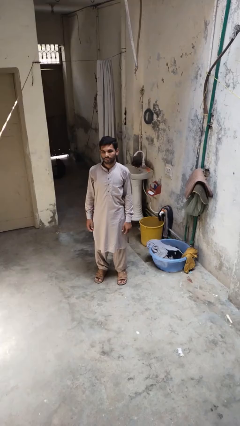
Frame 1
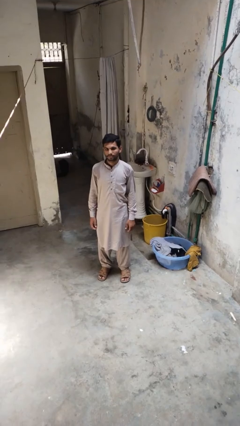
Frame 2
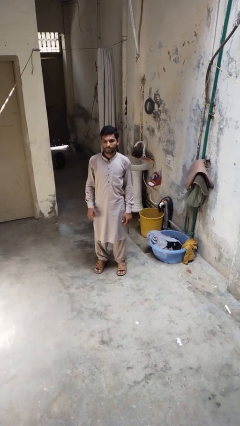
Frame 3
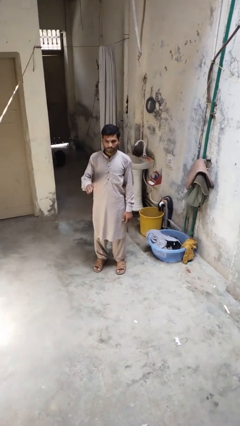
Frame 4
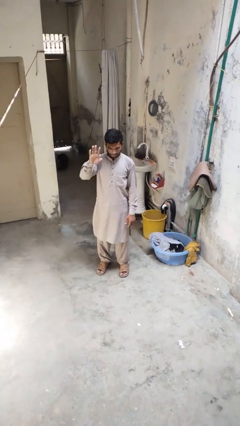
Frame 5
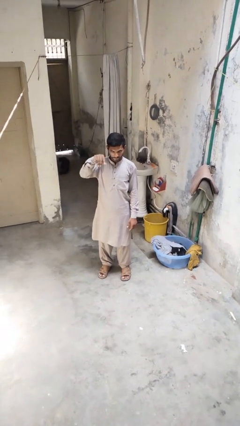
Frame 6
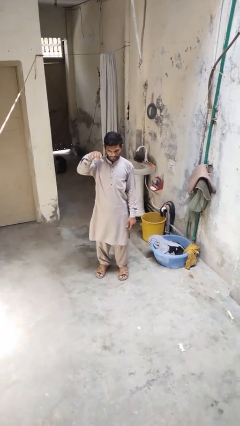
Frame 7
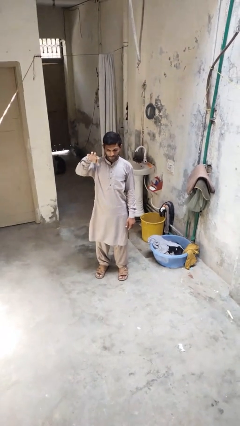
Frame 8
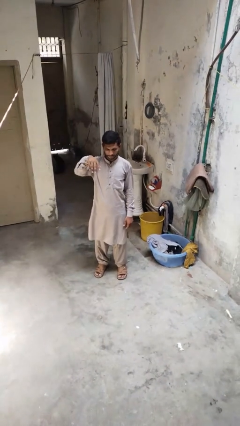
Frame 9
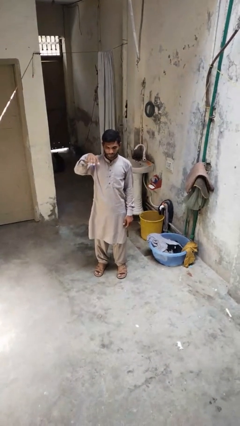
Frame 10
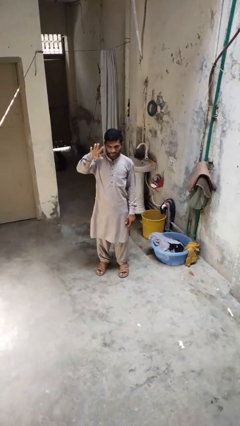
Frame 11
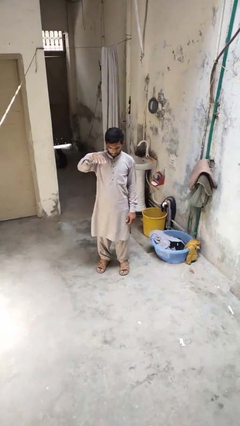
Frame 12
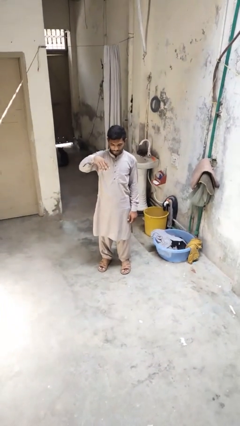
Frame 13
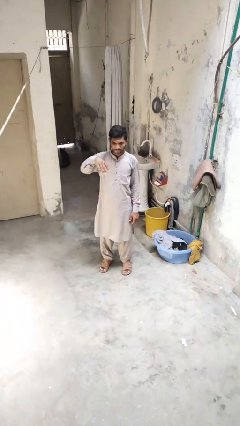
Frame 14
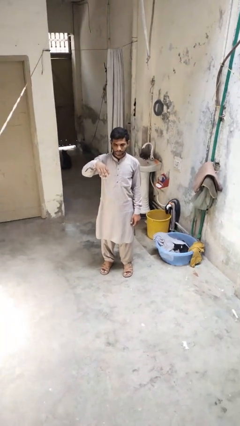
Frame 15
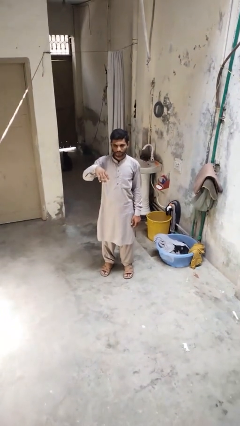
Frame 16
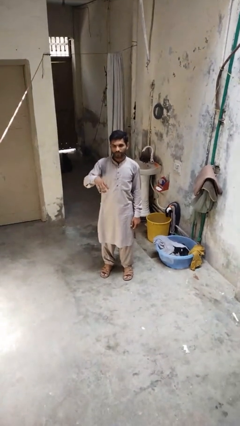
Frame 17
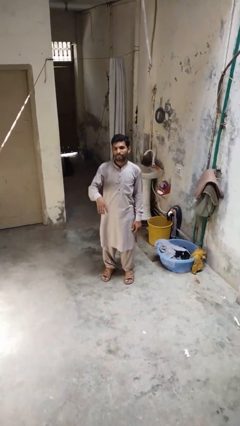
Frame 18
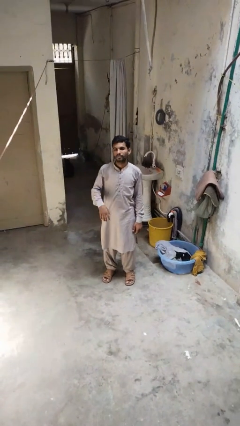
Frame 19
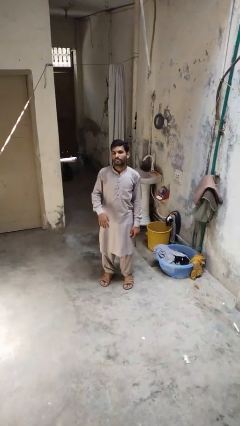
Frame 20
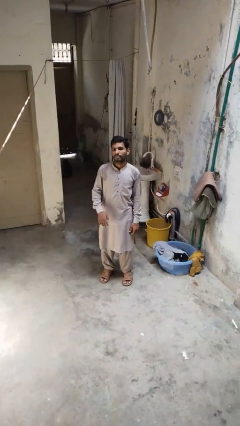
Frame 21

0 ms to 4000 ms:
person gestures come here

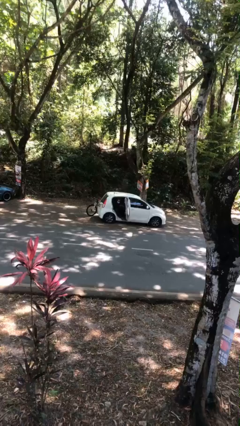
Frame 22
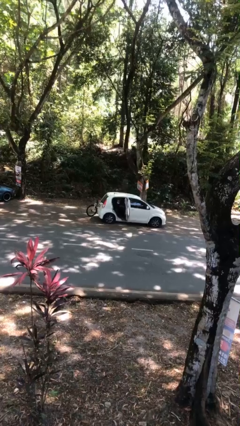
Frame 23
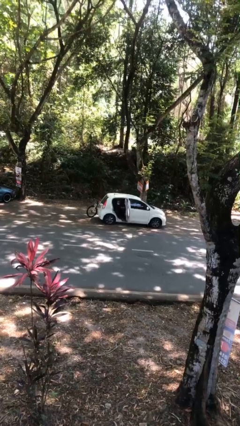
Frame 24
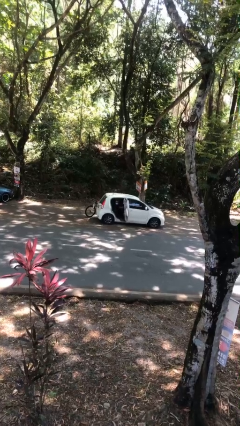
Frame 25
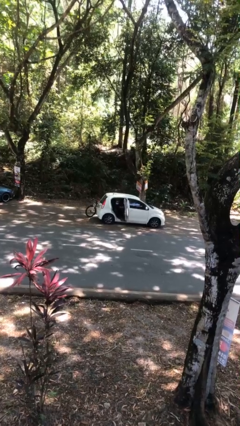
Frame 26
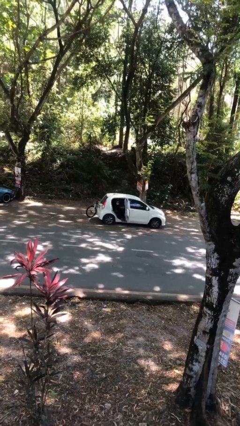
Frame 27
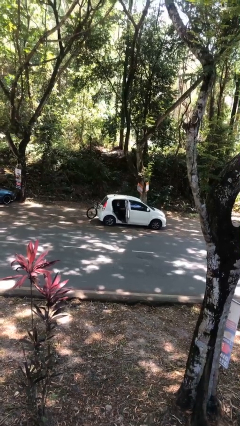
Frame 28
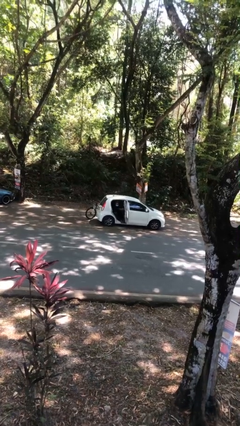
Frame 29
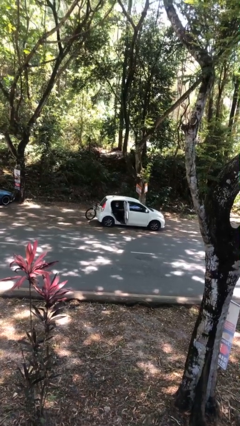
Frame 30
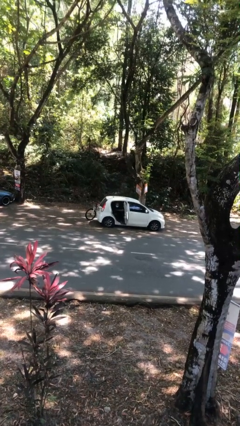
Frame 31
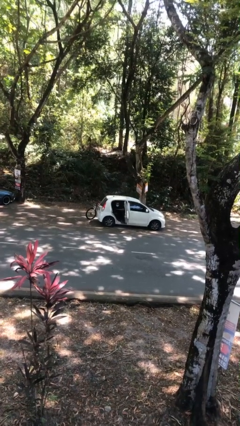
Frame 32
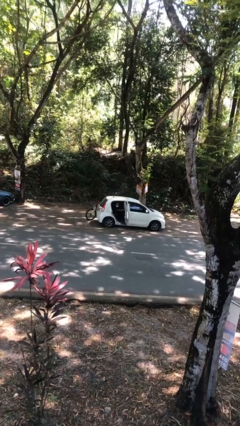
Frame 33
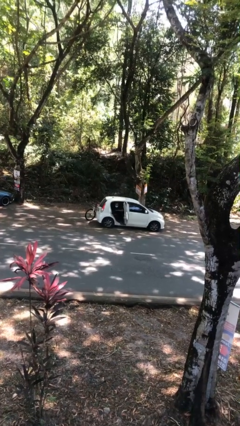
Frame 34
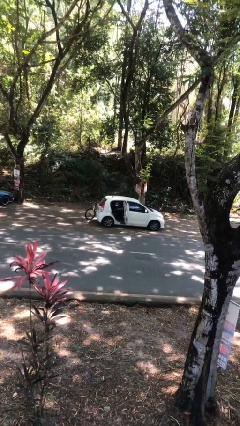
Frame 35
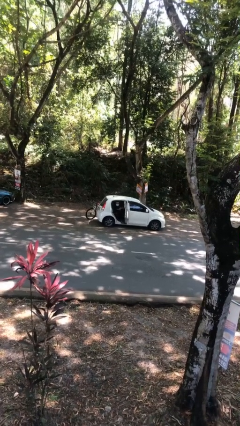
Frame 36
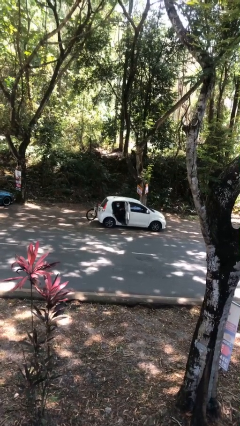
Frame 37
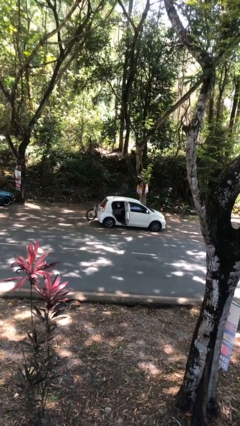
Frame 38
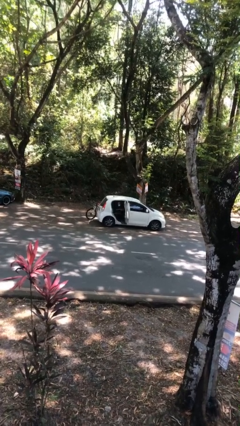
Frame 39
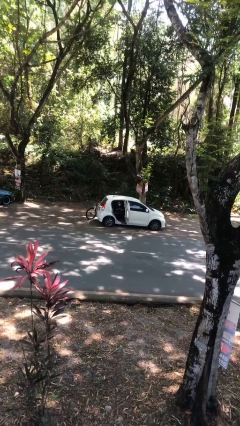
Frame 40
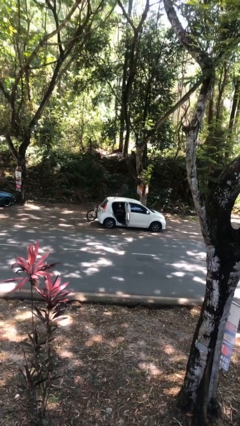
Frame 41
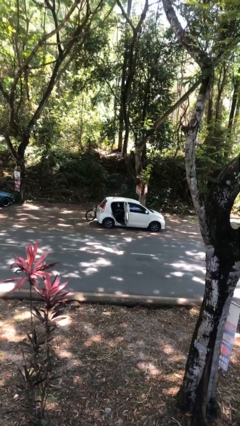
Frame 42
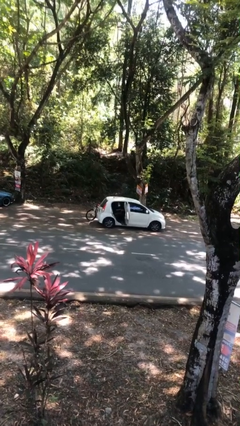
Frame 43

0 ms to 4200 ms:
person interacts with laptop

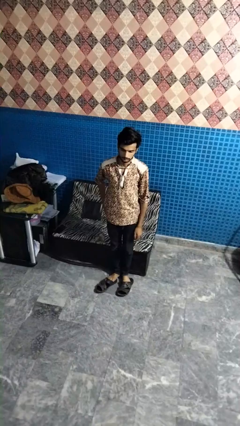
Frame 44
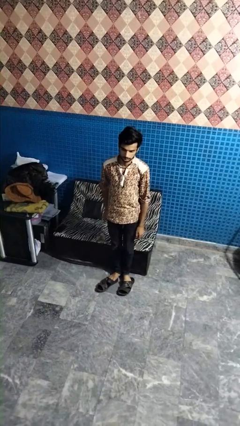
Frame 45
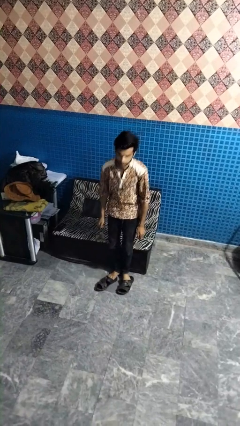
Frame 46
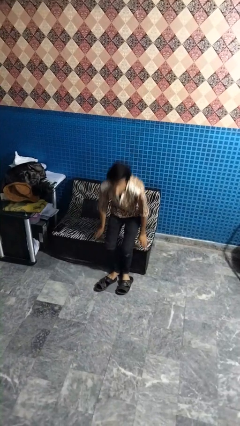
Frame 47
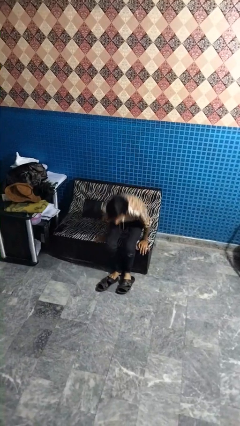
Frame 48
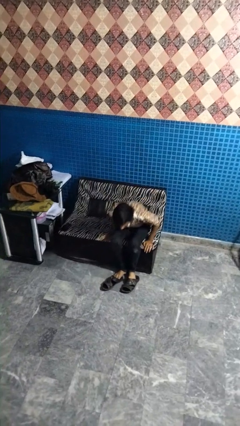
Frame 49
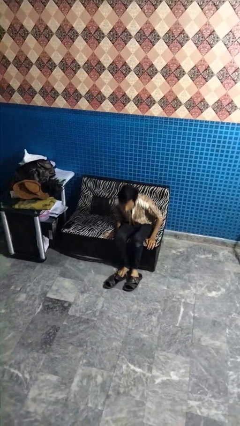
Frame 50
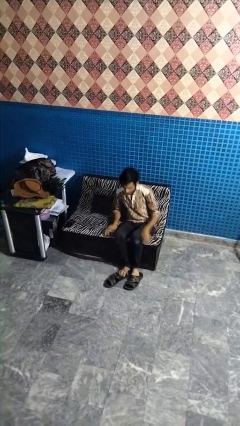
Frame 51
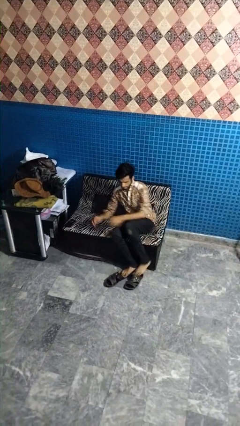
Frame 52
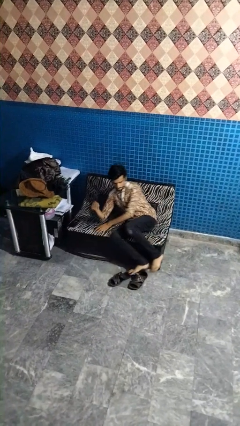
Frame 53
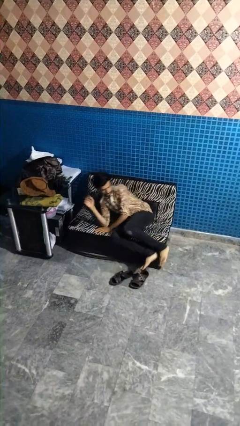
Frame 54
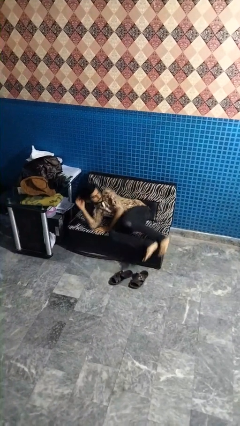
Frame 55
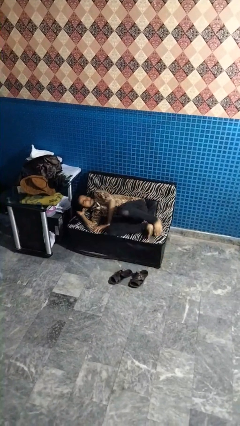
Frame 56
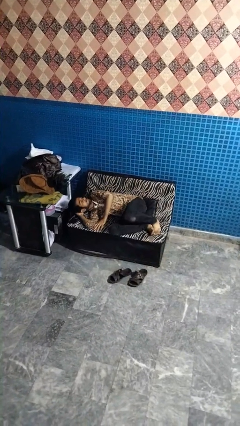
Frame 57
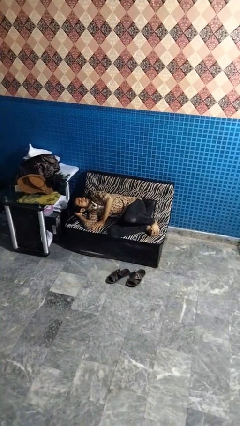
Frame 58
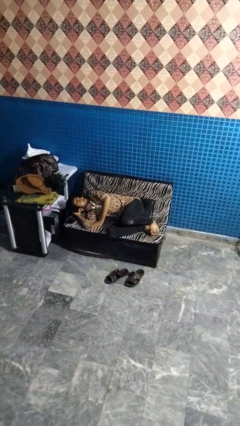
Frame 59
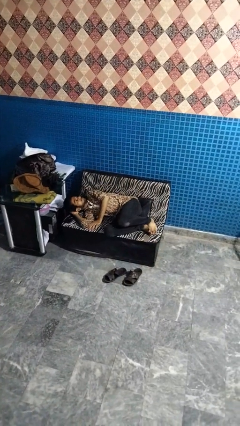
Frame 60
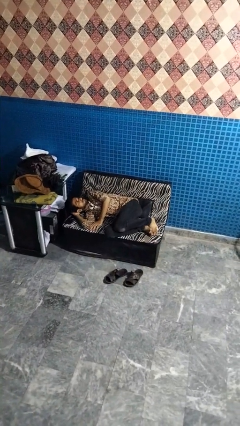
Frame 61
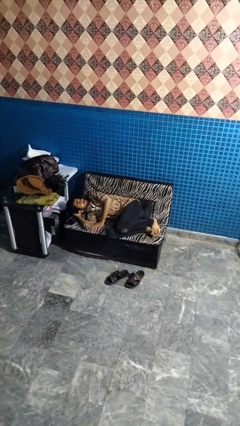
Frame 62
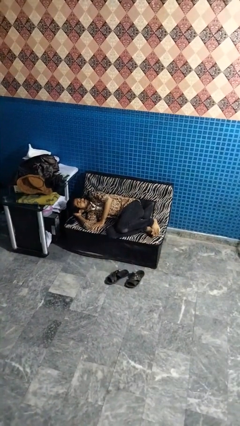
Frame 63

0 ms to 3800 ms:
person lies down on couch

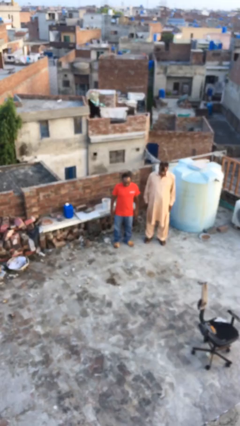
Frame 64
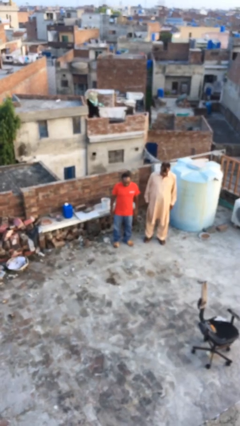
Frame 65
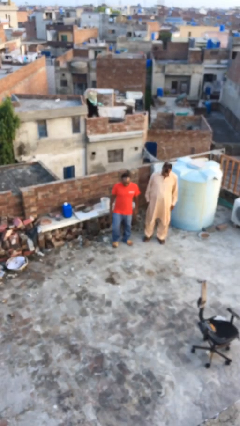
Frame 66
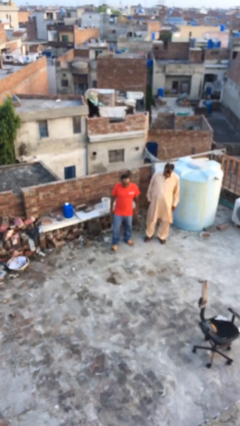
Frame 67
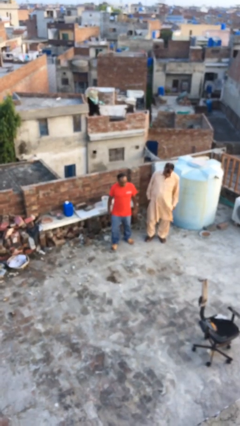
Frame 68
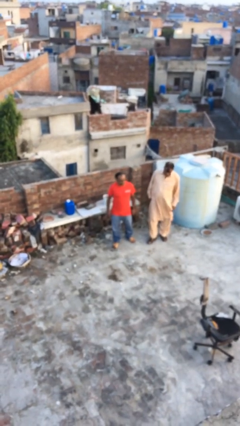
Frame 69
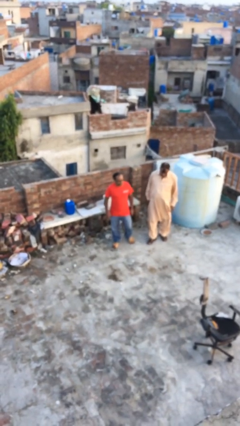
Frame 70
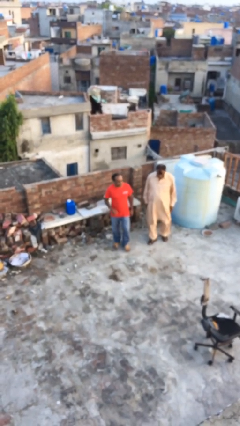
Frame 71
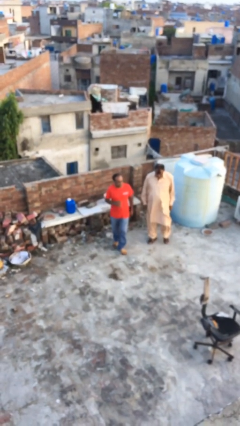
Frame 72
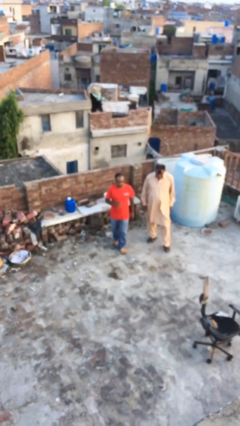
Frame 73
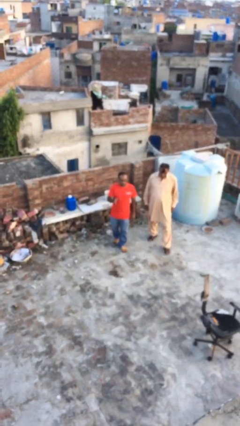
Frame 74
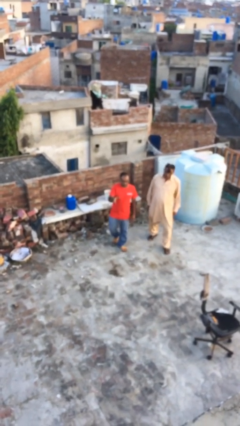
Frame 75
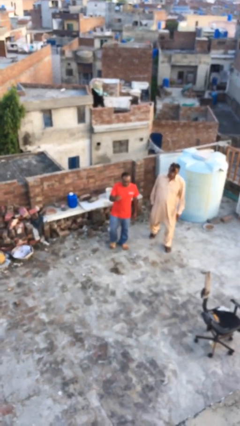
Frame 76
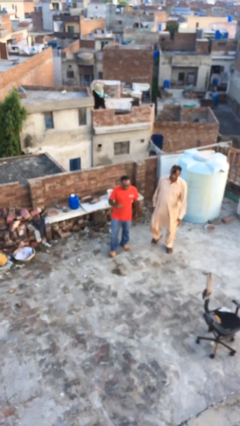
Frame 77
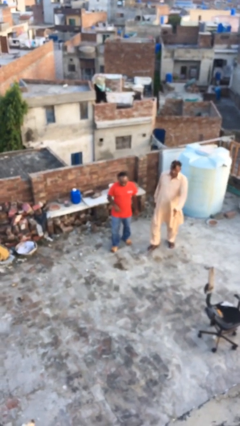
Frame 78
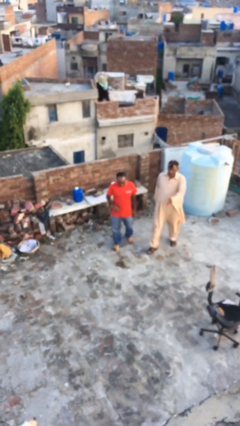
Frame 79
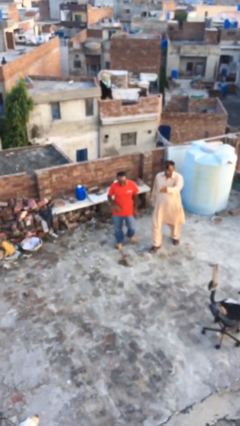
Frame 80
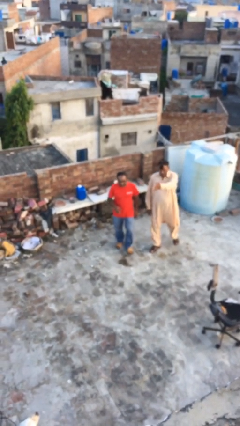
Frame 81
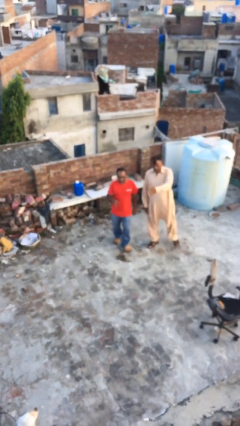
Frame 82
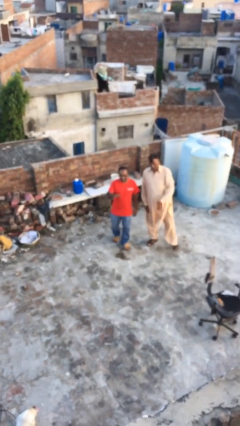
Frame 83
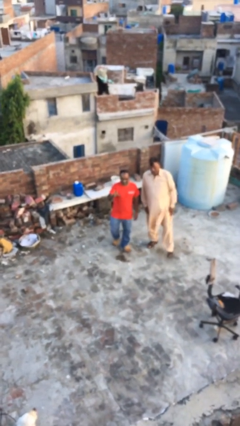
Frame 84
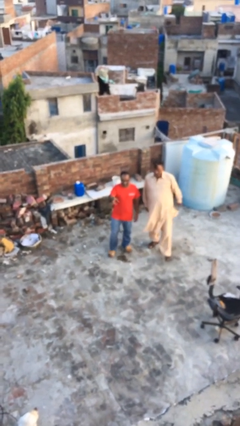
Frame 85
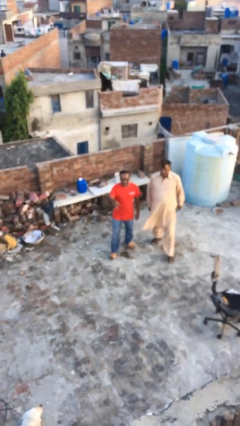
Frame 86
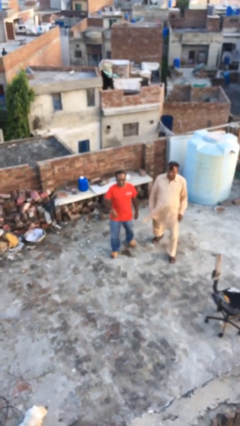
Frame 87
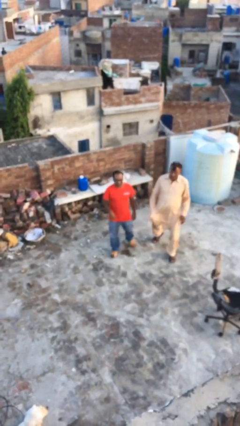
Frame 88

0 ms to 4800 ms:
person talks to person

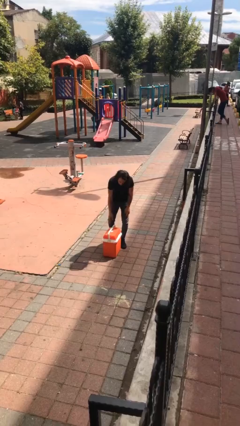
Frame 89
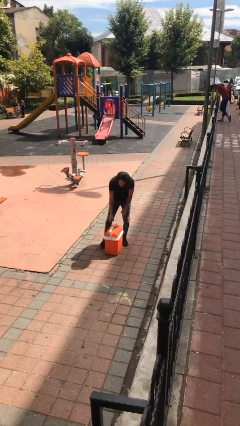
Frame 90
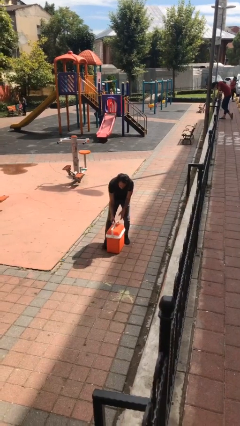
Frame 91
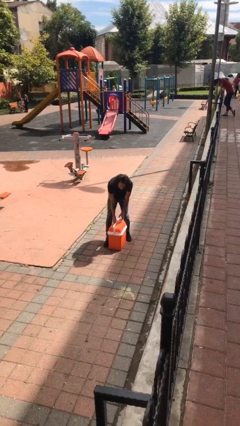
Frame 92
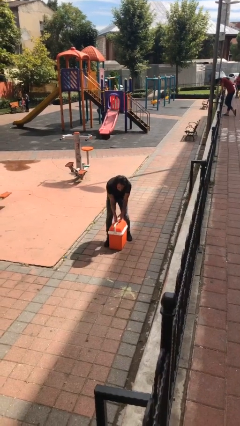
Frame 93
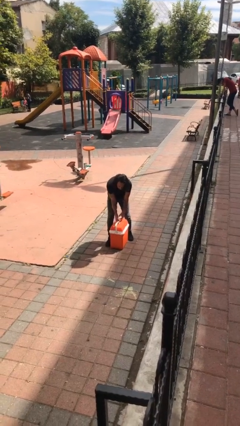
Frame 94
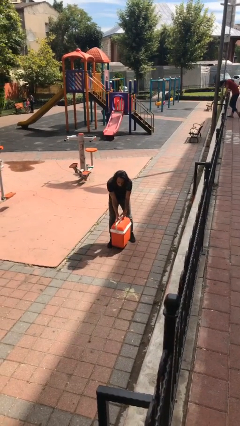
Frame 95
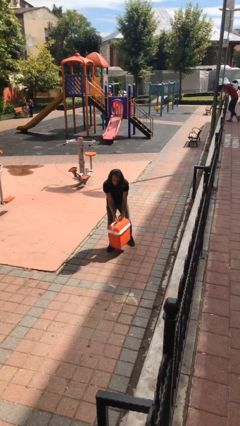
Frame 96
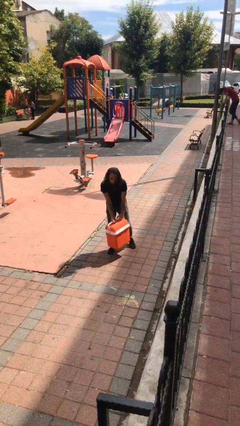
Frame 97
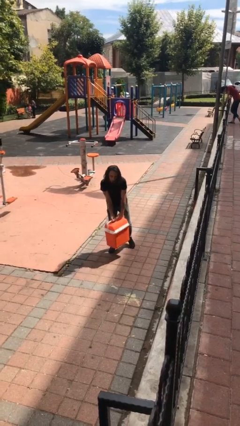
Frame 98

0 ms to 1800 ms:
person picks up object from floor
